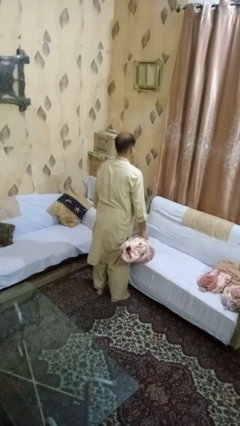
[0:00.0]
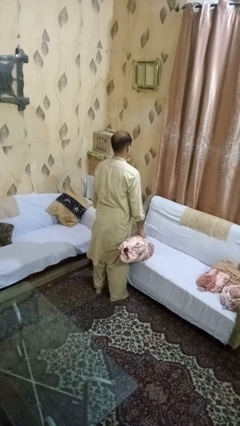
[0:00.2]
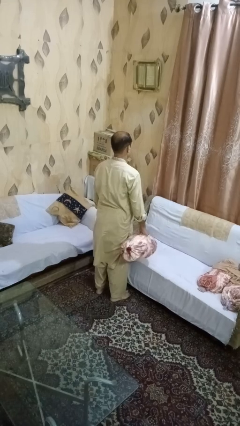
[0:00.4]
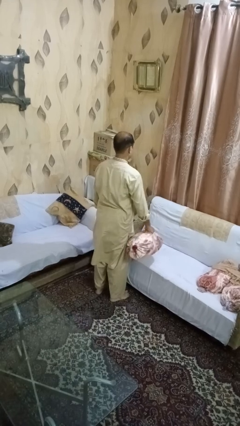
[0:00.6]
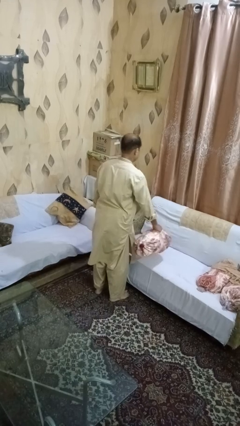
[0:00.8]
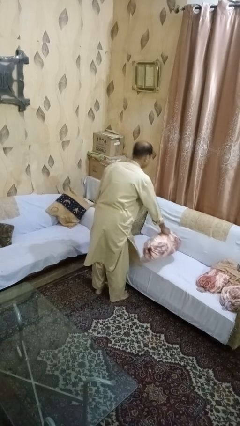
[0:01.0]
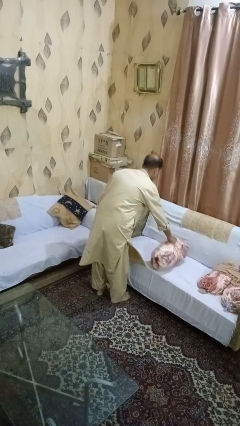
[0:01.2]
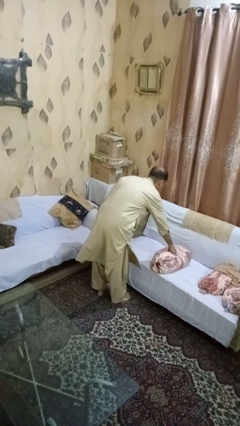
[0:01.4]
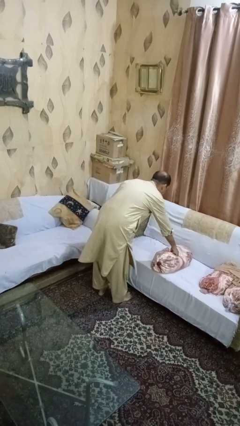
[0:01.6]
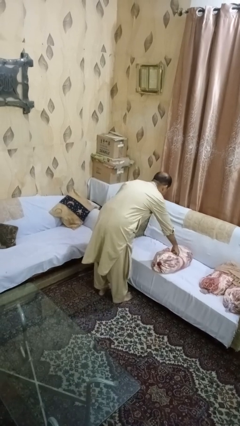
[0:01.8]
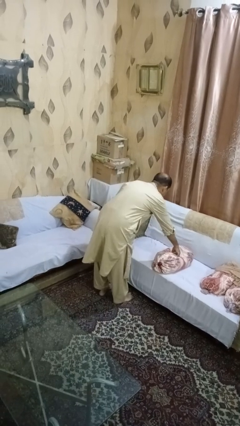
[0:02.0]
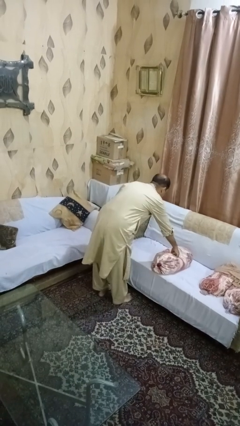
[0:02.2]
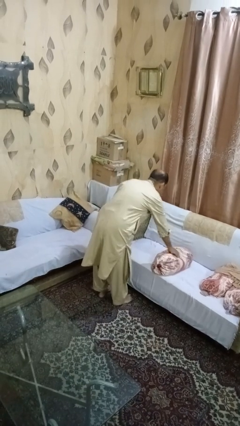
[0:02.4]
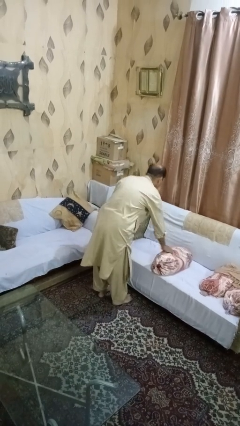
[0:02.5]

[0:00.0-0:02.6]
person puts down object on couch

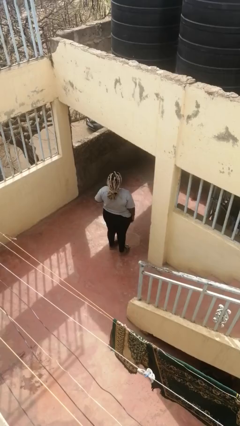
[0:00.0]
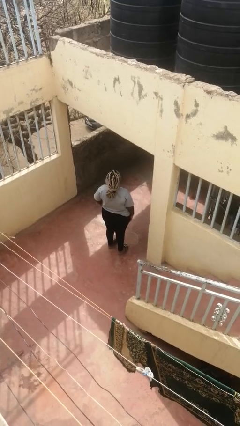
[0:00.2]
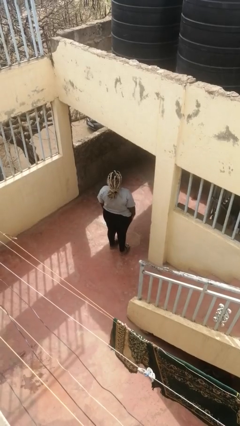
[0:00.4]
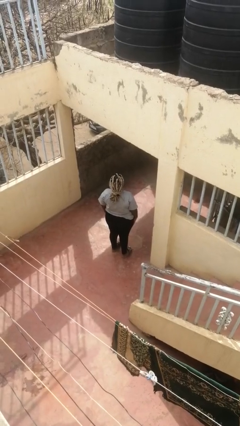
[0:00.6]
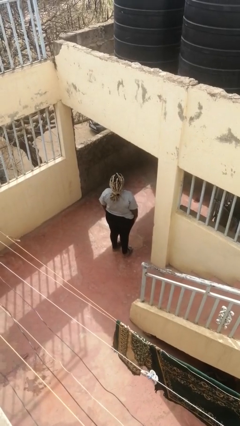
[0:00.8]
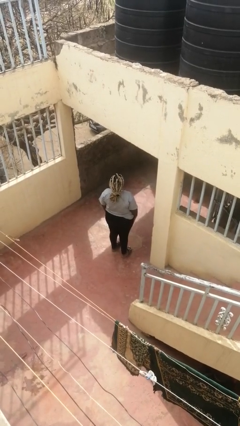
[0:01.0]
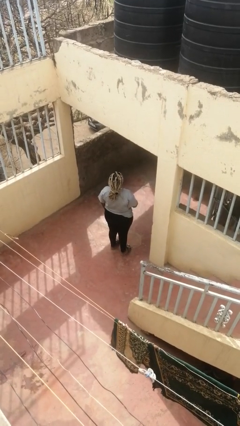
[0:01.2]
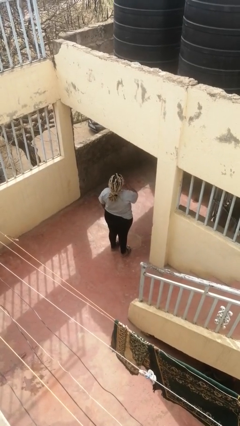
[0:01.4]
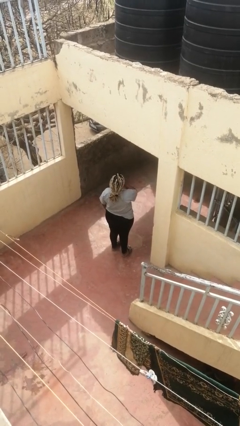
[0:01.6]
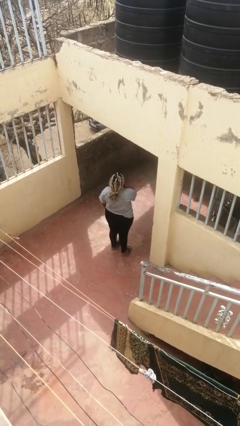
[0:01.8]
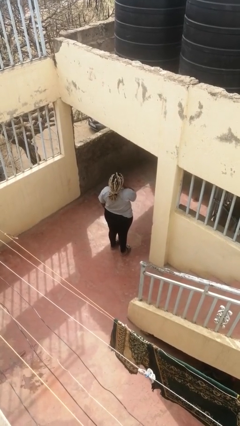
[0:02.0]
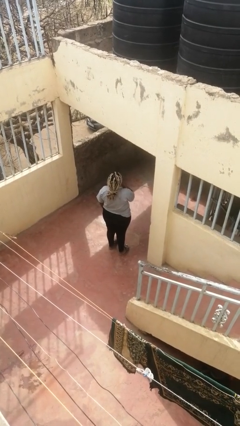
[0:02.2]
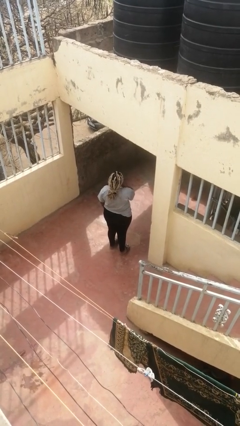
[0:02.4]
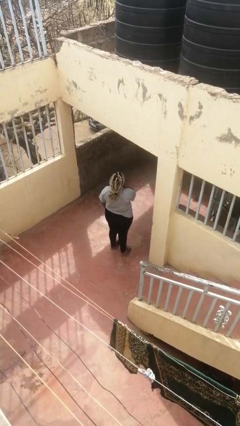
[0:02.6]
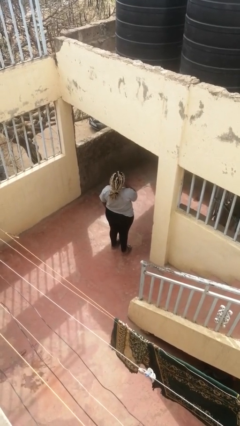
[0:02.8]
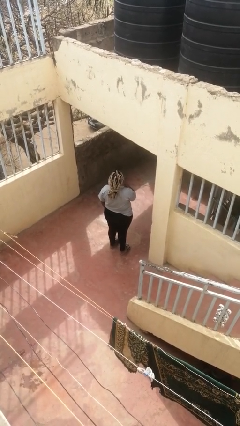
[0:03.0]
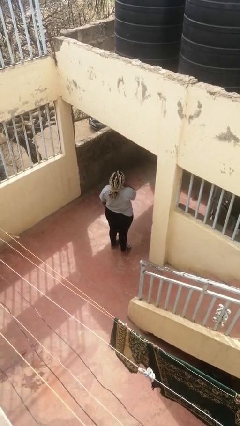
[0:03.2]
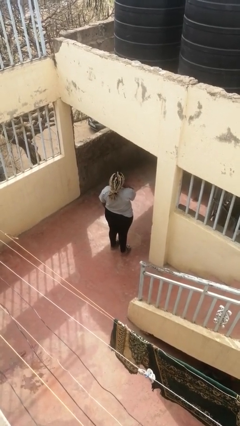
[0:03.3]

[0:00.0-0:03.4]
person strokes chin

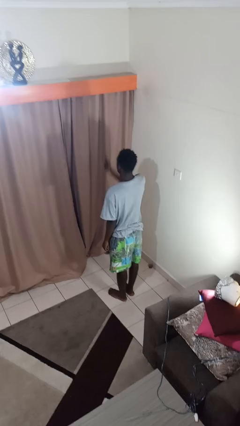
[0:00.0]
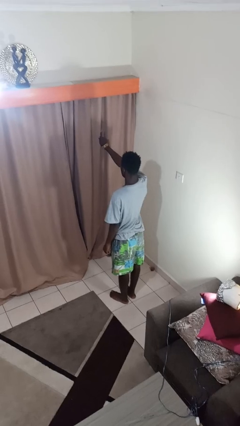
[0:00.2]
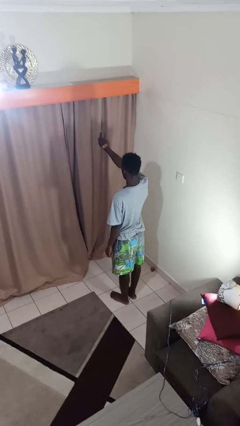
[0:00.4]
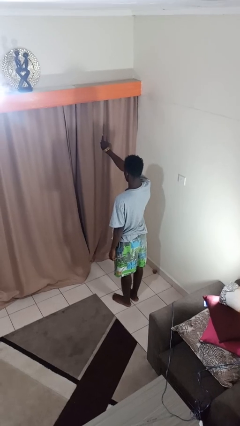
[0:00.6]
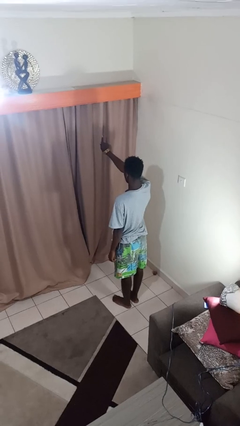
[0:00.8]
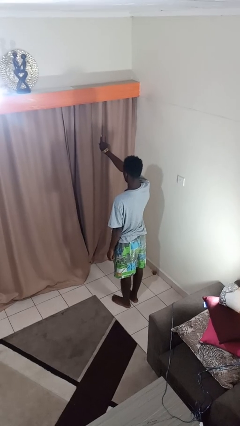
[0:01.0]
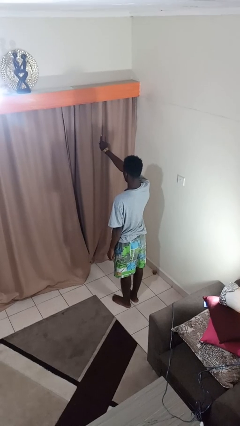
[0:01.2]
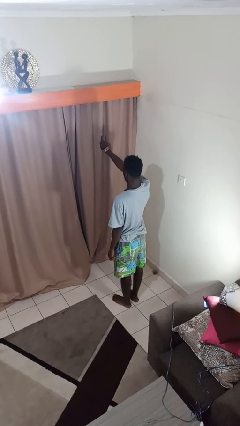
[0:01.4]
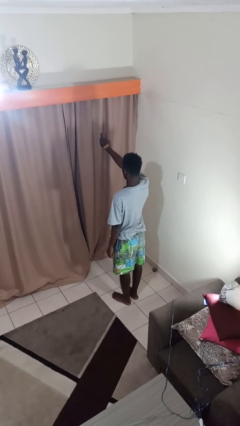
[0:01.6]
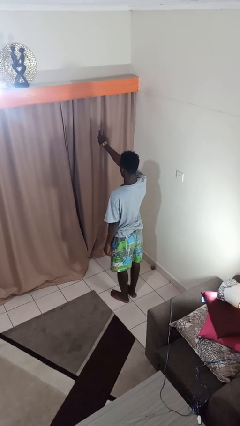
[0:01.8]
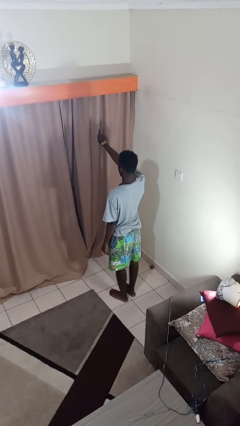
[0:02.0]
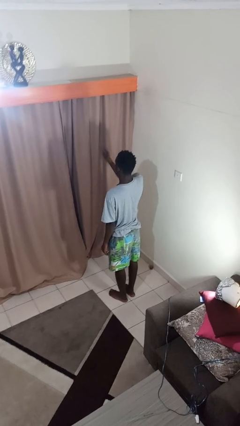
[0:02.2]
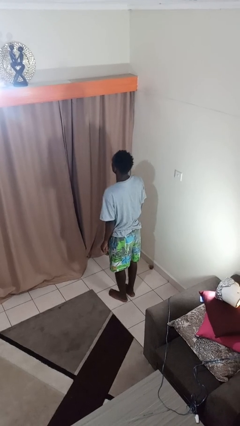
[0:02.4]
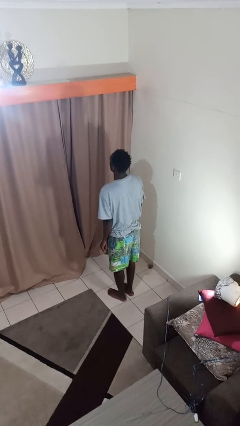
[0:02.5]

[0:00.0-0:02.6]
person gestures number one

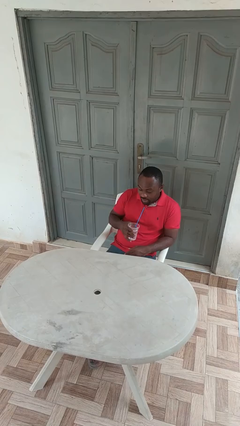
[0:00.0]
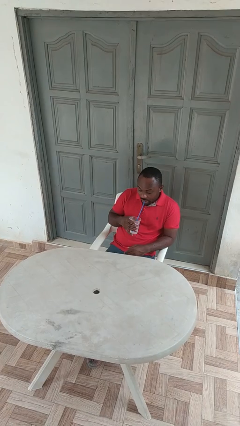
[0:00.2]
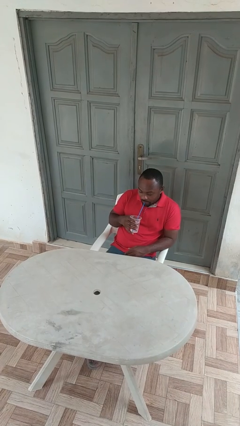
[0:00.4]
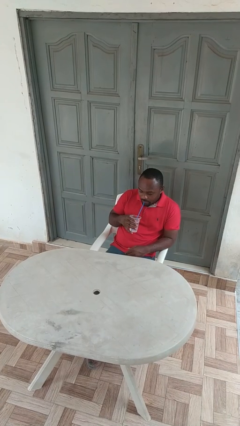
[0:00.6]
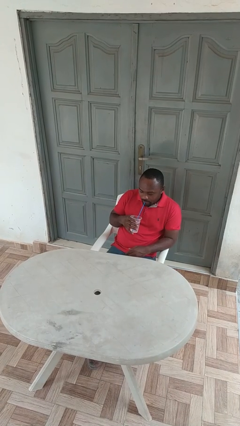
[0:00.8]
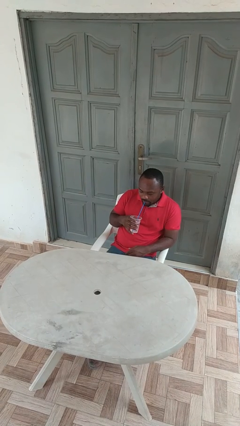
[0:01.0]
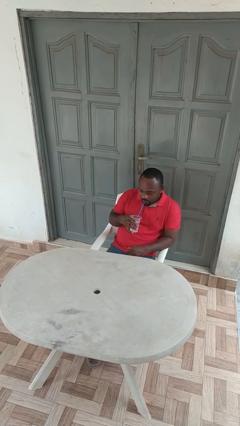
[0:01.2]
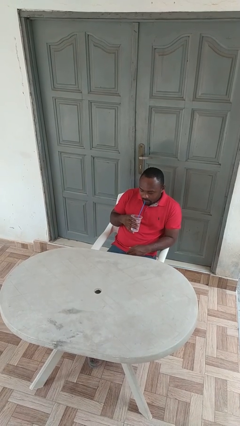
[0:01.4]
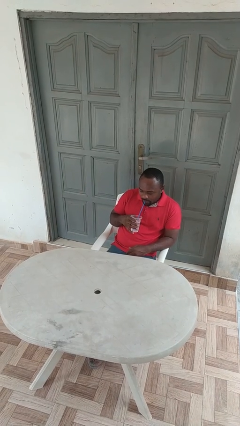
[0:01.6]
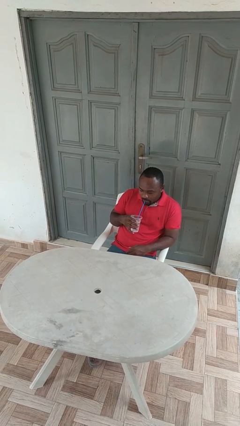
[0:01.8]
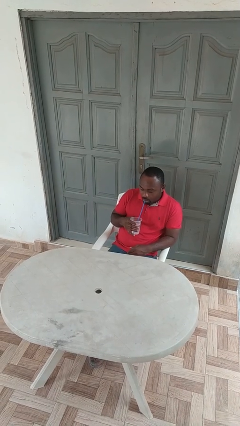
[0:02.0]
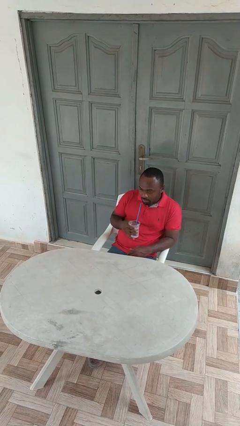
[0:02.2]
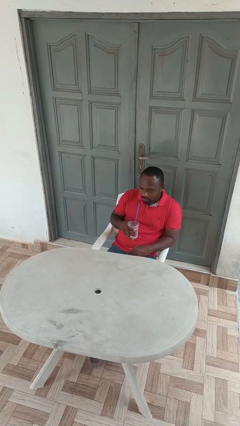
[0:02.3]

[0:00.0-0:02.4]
person drinks from straw

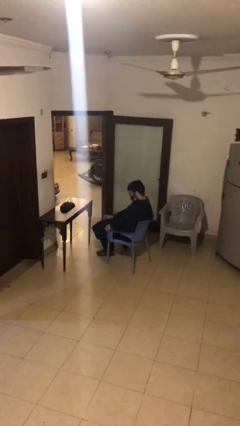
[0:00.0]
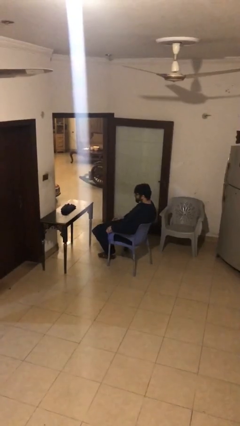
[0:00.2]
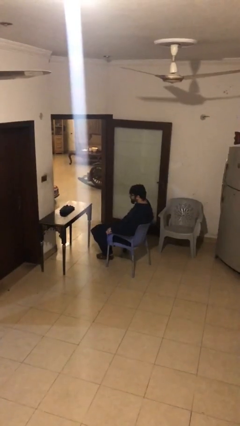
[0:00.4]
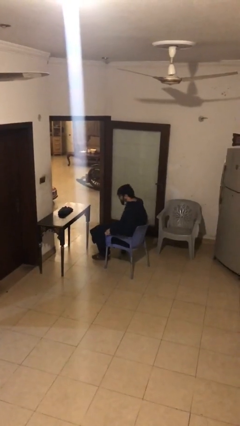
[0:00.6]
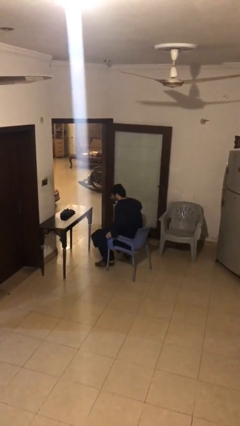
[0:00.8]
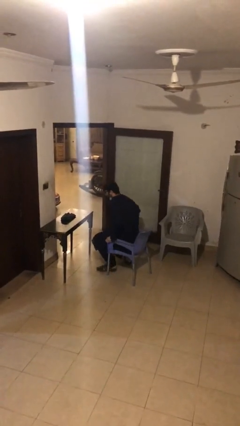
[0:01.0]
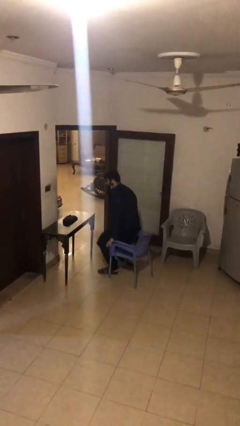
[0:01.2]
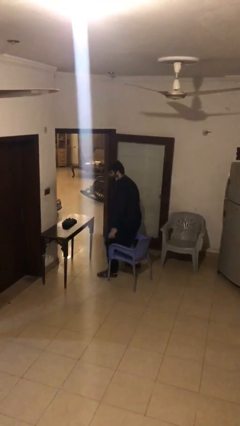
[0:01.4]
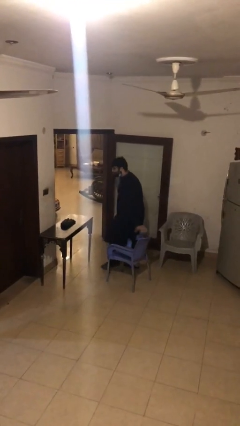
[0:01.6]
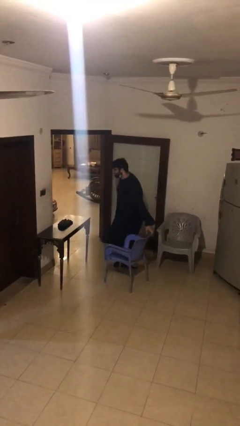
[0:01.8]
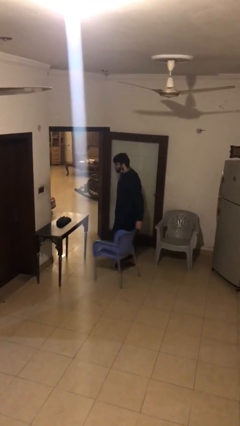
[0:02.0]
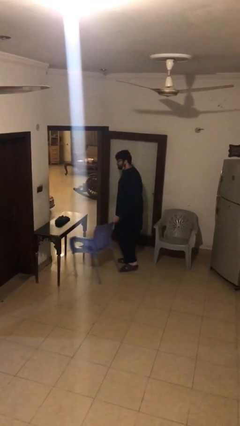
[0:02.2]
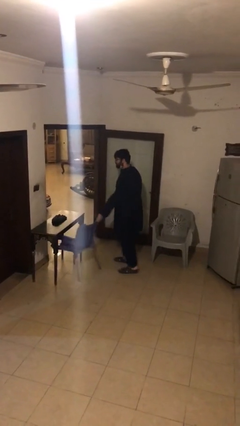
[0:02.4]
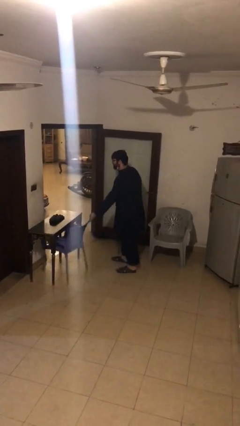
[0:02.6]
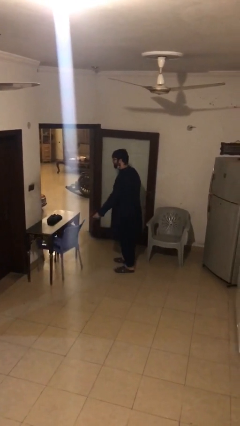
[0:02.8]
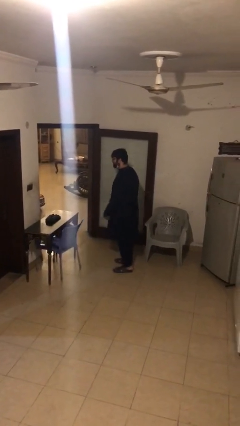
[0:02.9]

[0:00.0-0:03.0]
person stands up

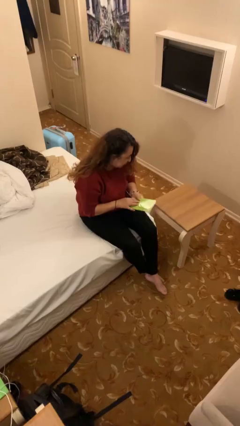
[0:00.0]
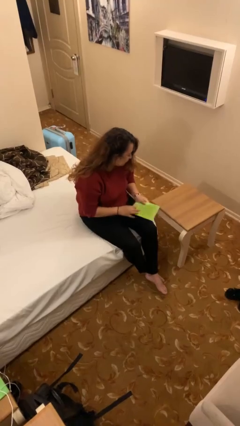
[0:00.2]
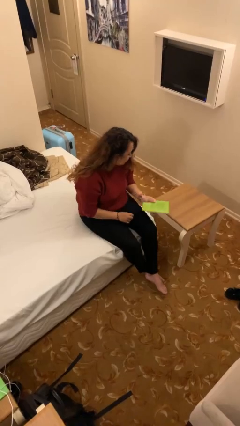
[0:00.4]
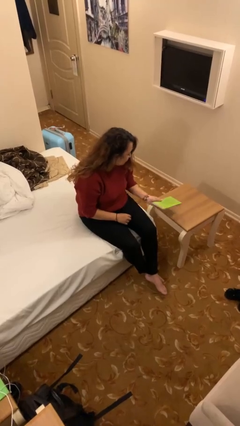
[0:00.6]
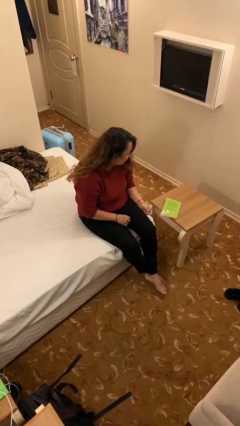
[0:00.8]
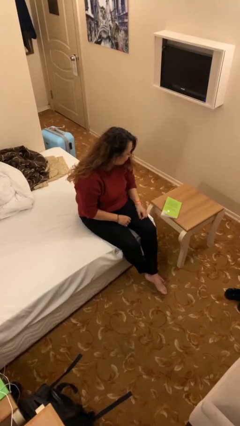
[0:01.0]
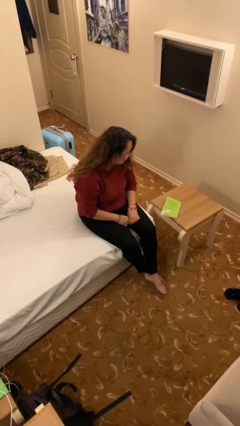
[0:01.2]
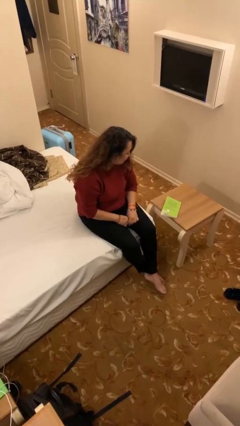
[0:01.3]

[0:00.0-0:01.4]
person puts down object on table

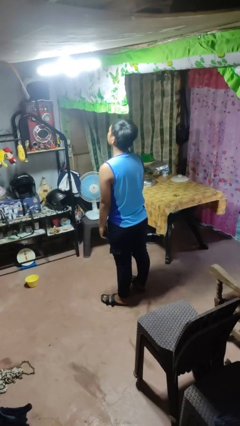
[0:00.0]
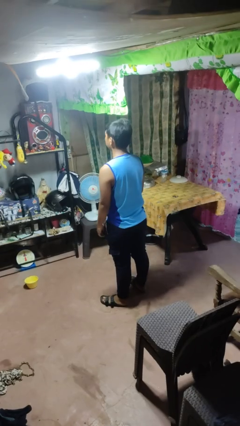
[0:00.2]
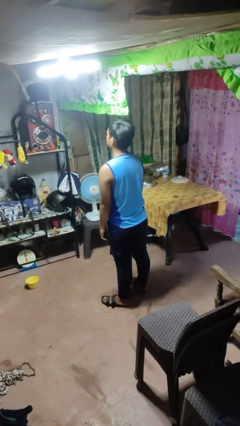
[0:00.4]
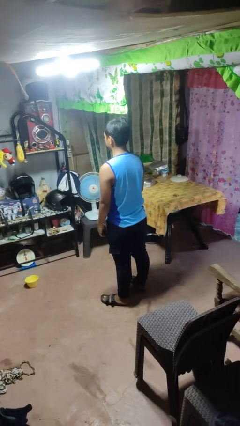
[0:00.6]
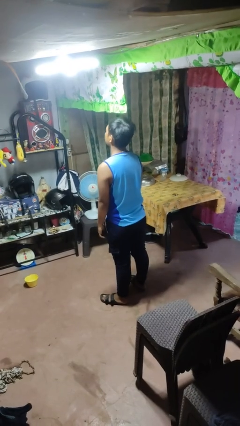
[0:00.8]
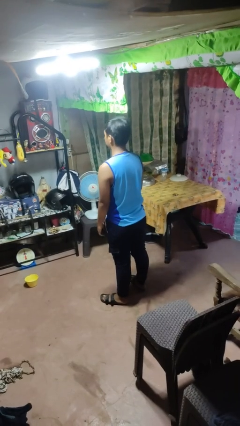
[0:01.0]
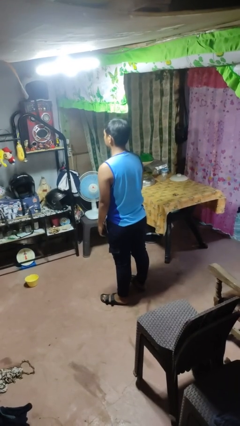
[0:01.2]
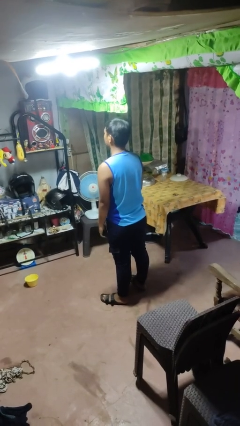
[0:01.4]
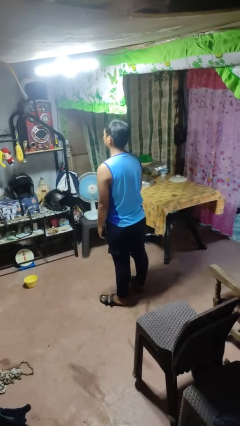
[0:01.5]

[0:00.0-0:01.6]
person nods head
